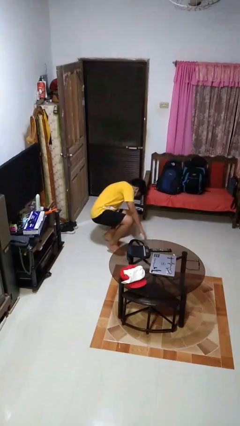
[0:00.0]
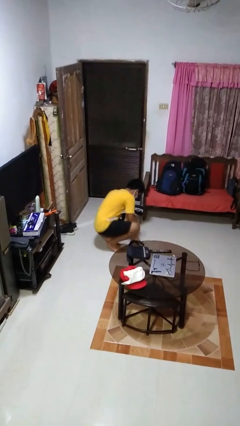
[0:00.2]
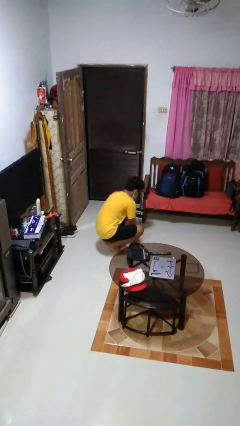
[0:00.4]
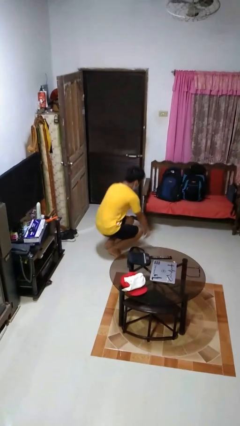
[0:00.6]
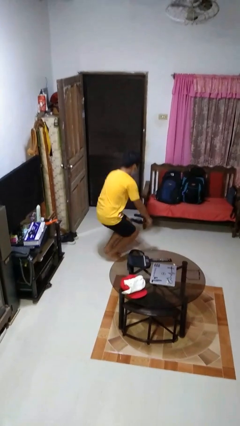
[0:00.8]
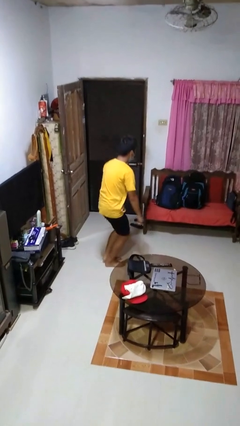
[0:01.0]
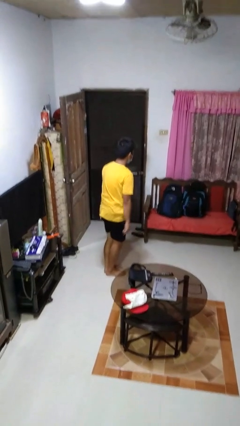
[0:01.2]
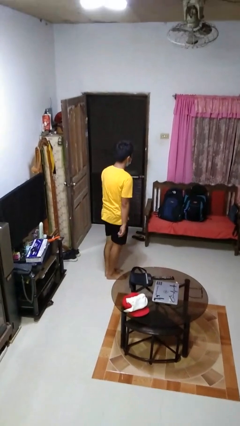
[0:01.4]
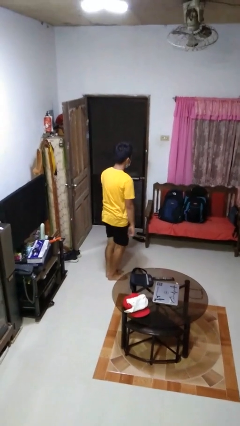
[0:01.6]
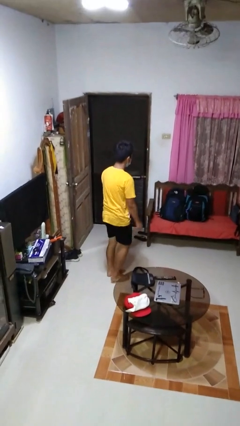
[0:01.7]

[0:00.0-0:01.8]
person stands up from floor

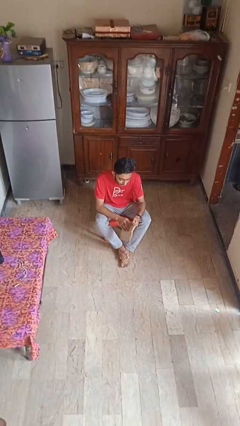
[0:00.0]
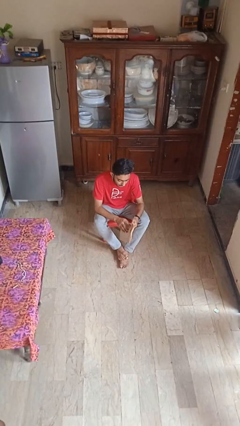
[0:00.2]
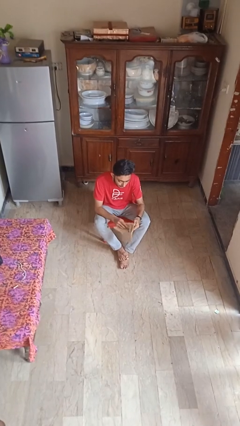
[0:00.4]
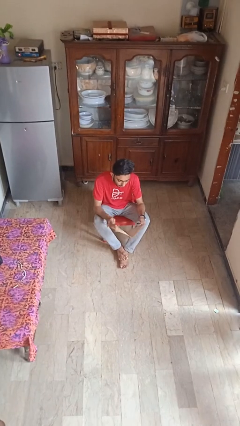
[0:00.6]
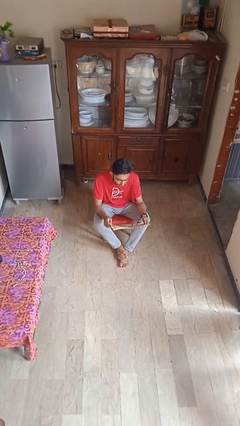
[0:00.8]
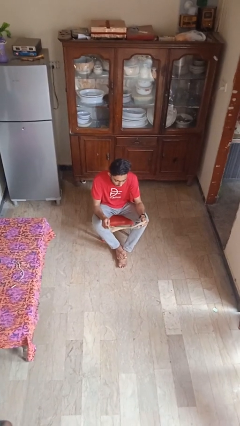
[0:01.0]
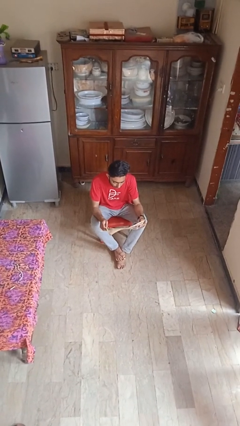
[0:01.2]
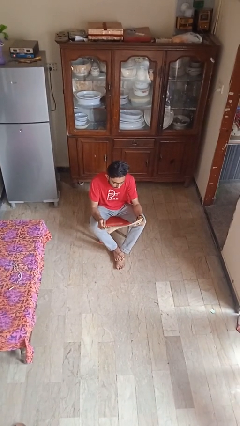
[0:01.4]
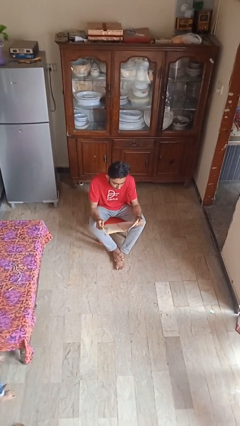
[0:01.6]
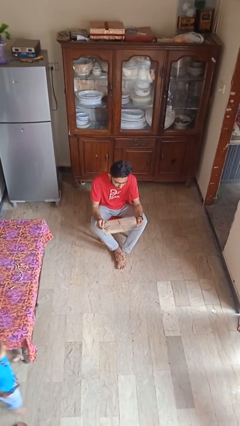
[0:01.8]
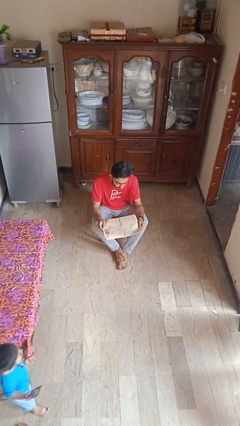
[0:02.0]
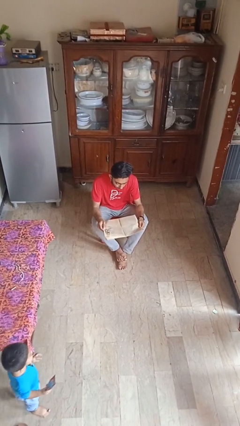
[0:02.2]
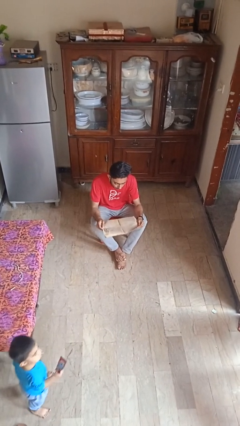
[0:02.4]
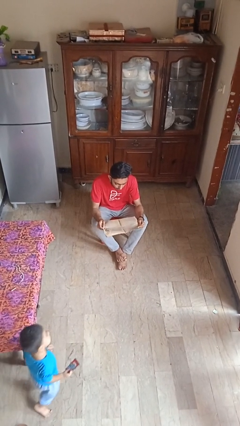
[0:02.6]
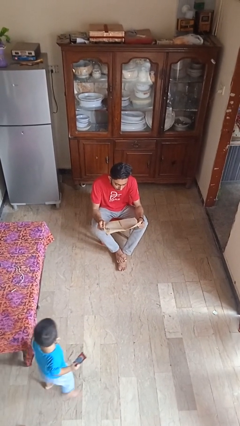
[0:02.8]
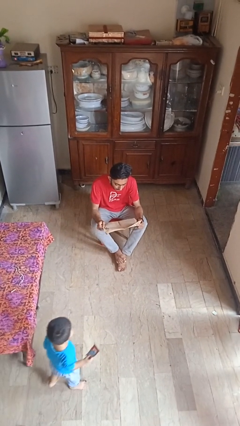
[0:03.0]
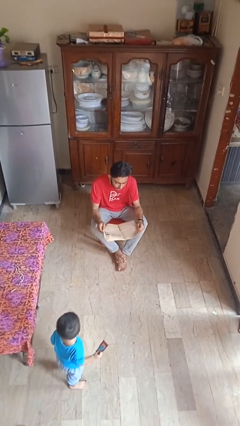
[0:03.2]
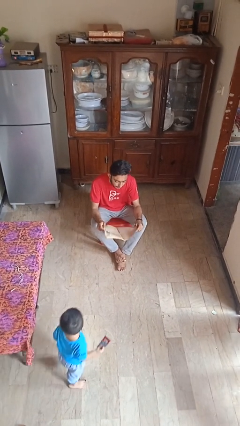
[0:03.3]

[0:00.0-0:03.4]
person reads newspaper

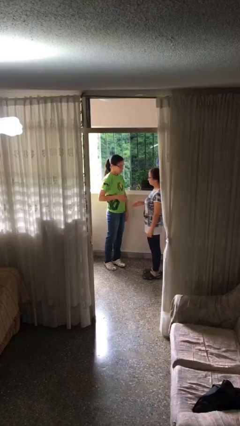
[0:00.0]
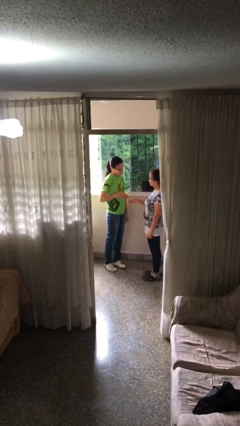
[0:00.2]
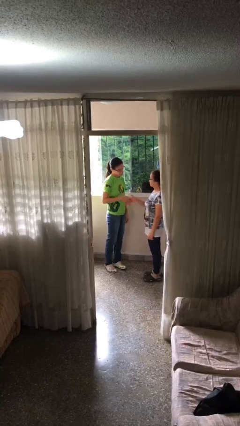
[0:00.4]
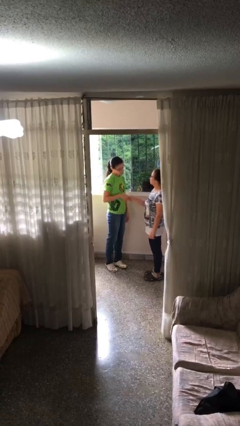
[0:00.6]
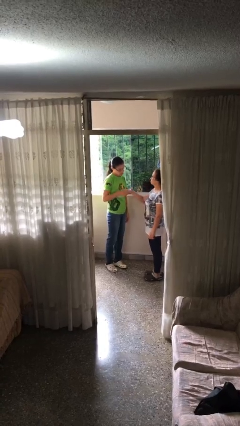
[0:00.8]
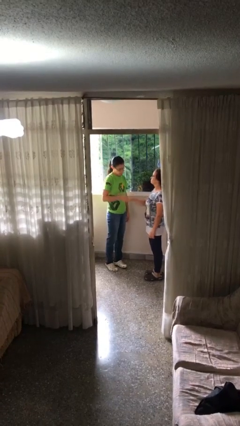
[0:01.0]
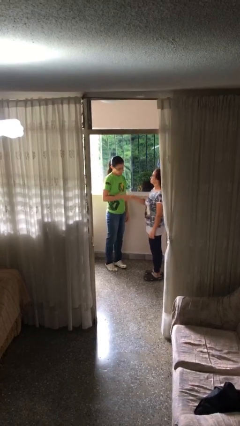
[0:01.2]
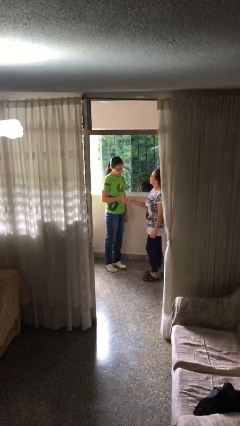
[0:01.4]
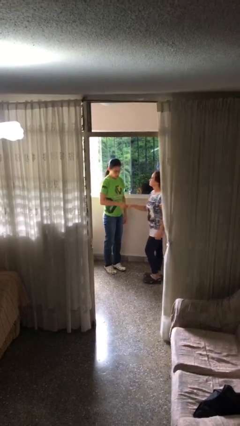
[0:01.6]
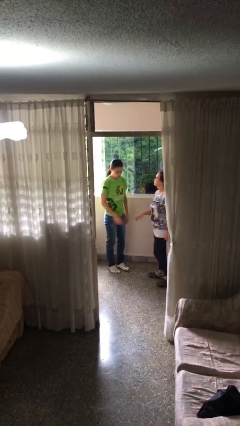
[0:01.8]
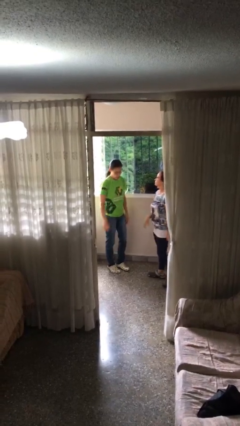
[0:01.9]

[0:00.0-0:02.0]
person shakes hand

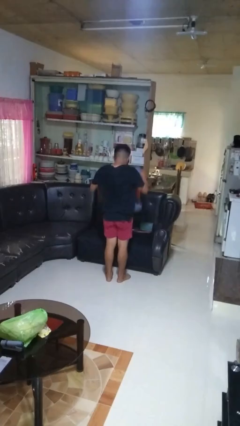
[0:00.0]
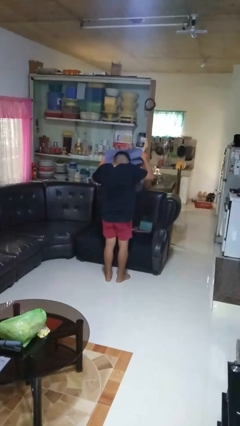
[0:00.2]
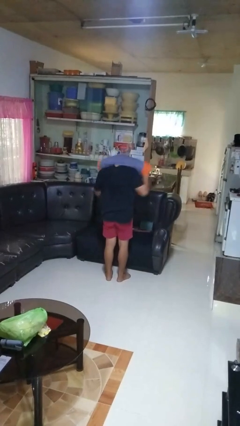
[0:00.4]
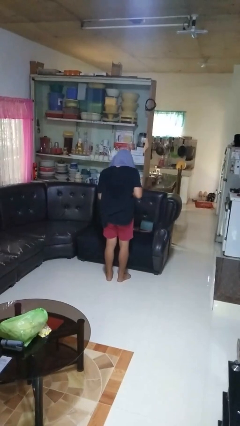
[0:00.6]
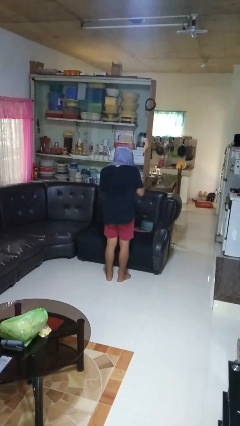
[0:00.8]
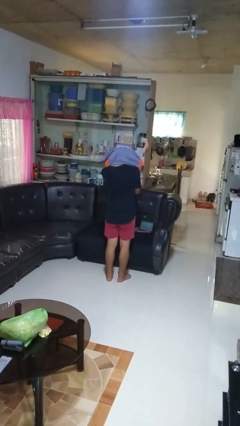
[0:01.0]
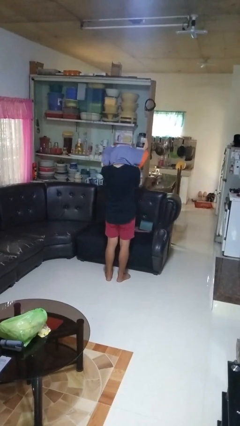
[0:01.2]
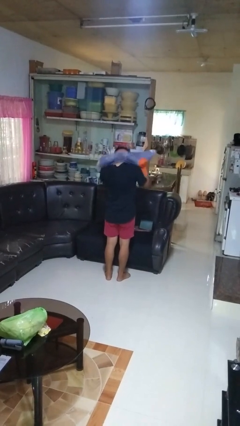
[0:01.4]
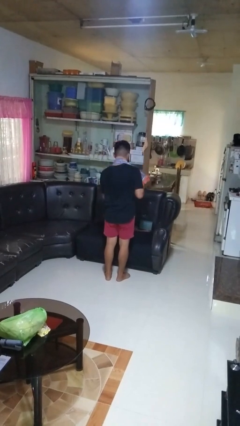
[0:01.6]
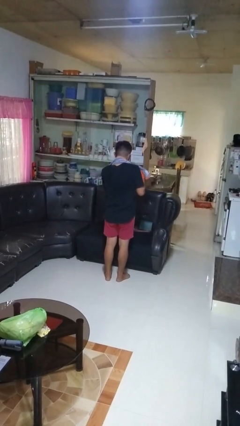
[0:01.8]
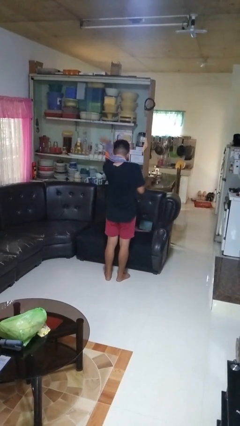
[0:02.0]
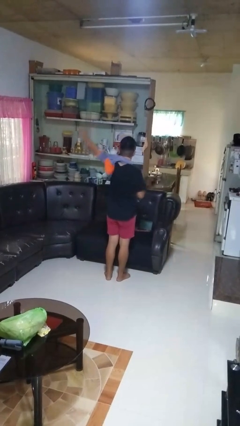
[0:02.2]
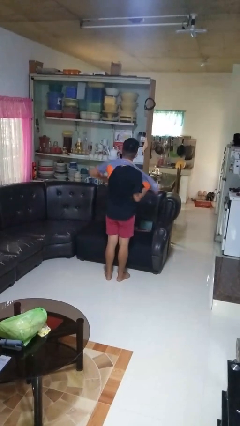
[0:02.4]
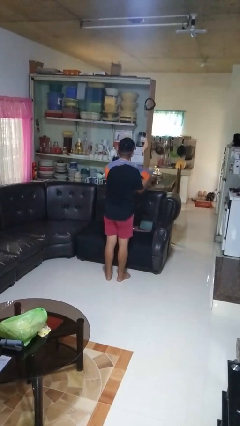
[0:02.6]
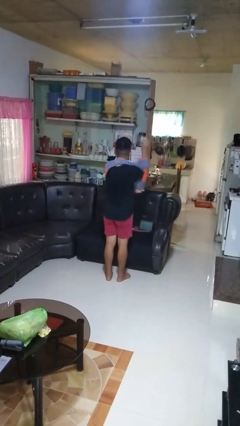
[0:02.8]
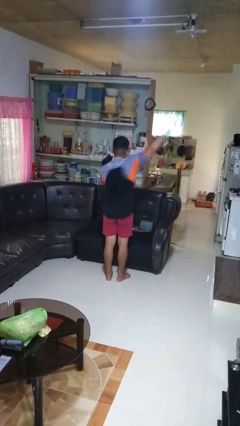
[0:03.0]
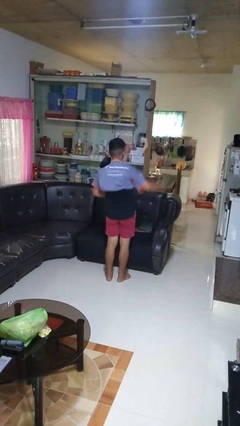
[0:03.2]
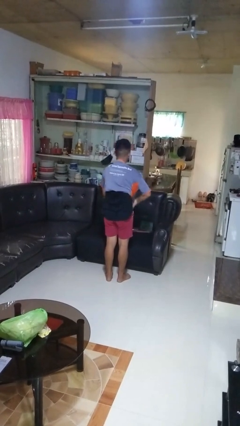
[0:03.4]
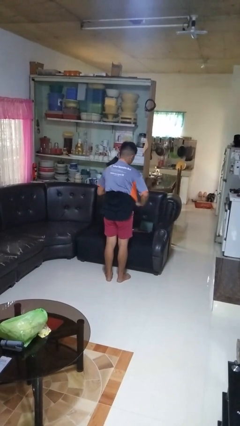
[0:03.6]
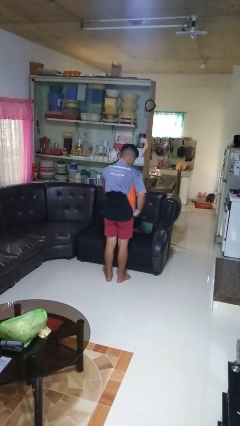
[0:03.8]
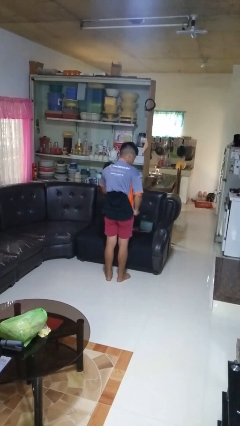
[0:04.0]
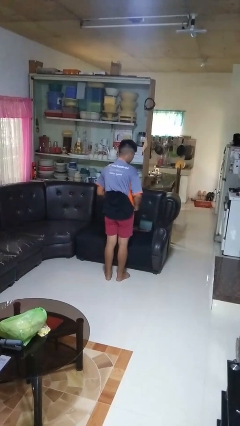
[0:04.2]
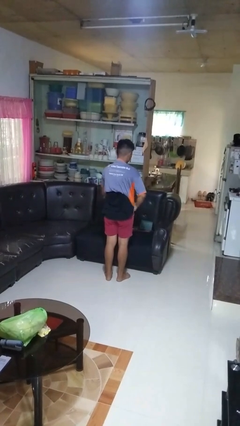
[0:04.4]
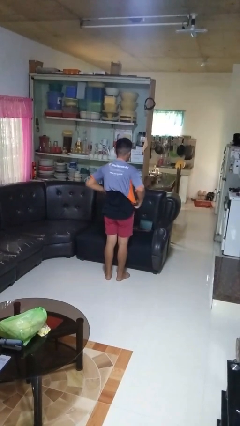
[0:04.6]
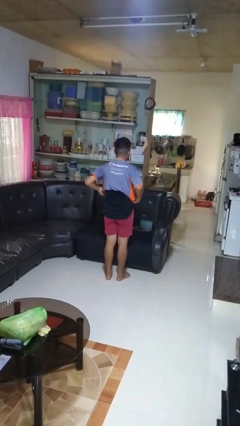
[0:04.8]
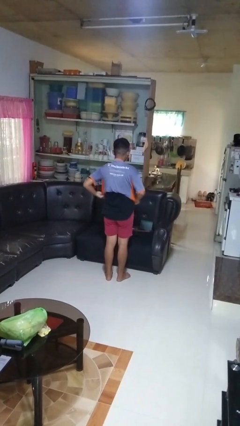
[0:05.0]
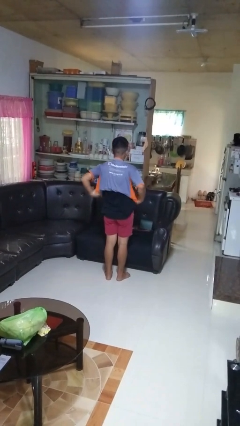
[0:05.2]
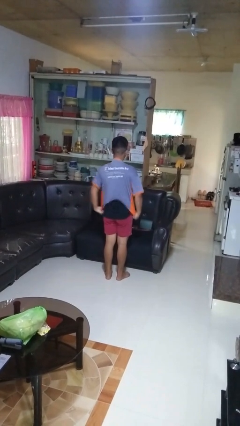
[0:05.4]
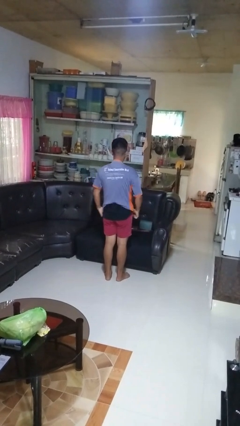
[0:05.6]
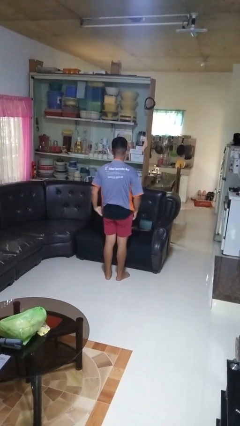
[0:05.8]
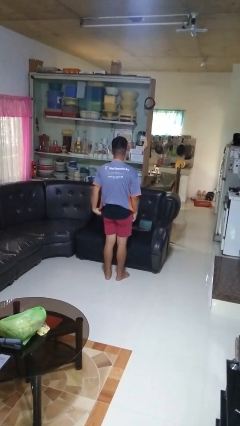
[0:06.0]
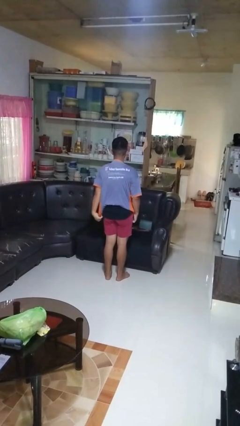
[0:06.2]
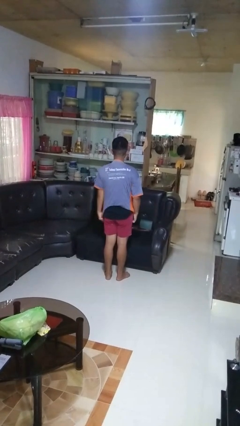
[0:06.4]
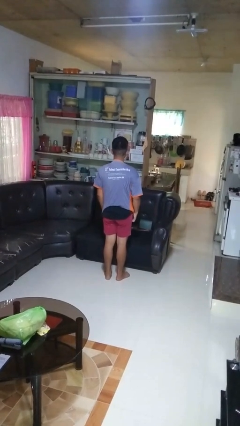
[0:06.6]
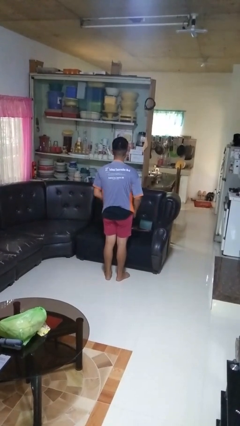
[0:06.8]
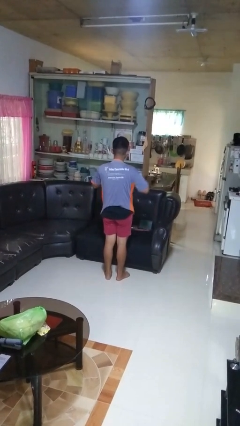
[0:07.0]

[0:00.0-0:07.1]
person puts on shirt

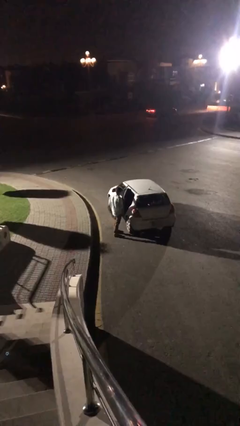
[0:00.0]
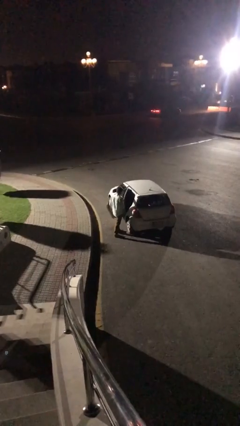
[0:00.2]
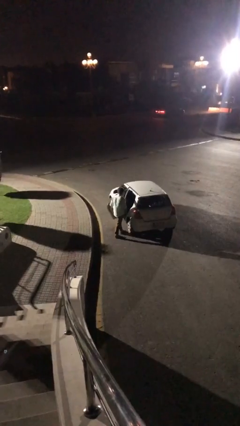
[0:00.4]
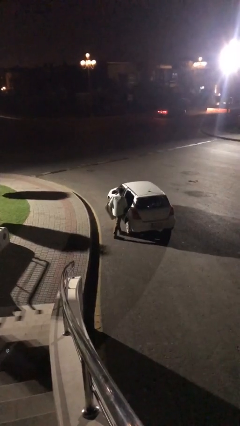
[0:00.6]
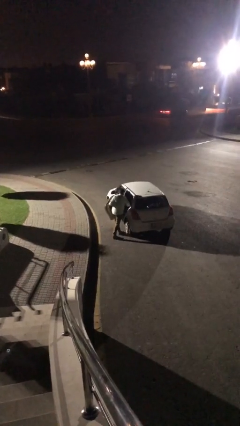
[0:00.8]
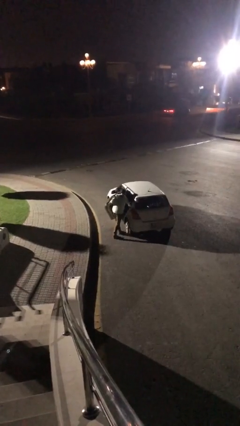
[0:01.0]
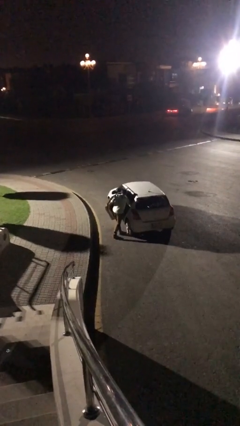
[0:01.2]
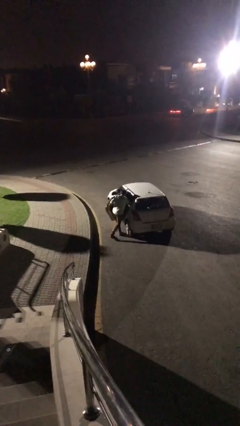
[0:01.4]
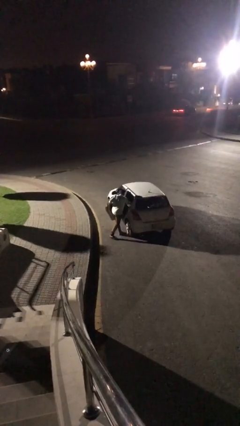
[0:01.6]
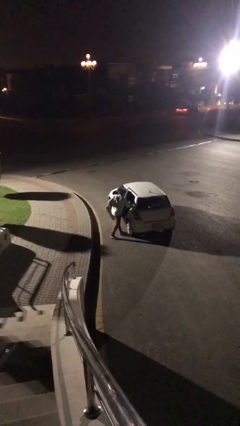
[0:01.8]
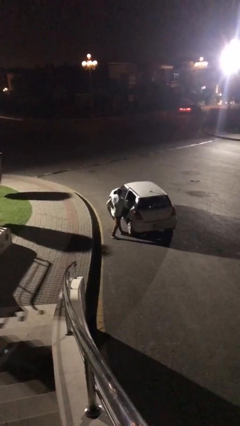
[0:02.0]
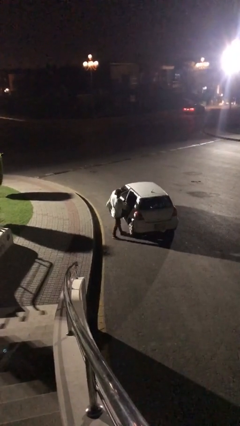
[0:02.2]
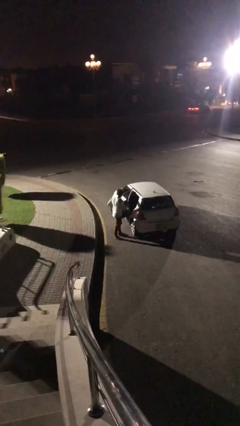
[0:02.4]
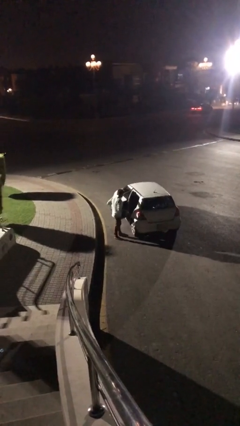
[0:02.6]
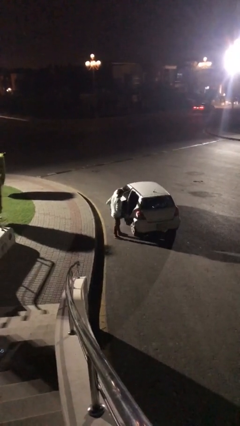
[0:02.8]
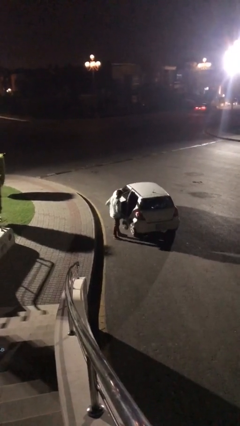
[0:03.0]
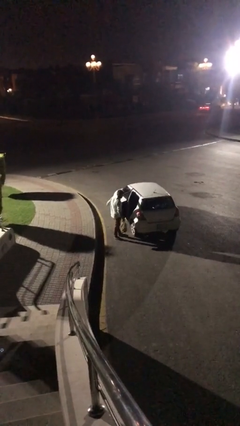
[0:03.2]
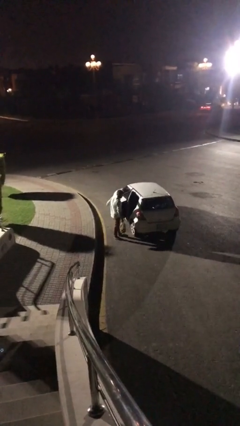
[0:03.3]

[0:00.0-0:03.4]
person unloads car
